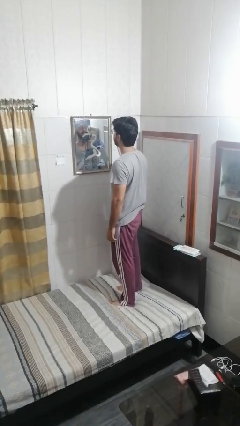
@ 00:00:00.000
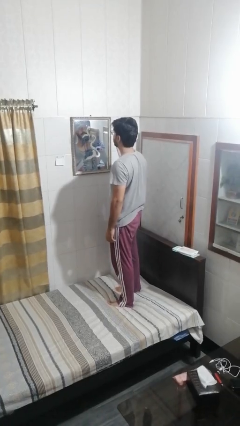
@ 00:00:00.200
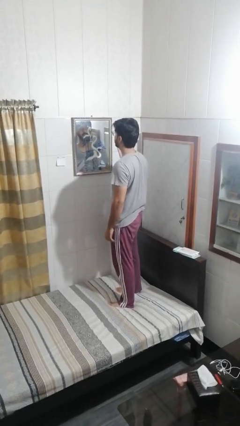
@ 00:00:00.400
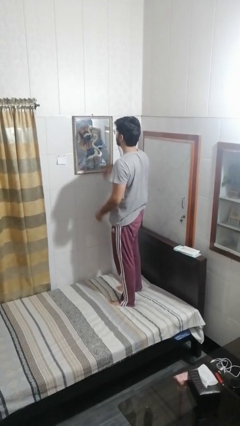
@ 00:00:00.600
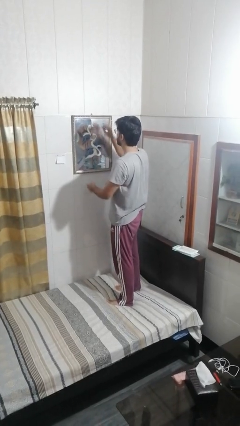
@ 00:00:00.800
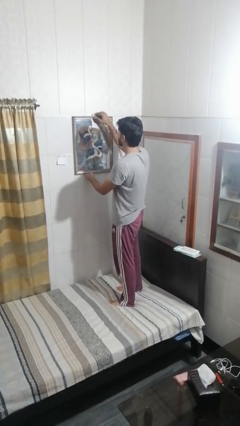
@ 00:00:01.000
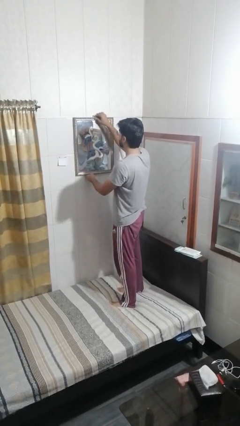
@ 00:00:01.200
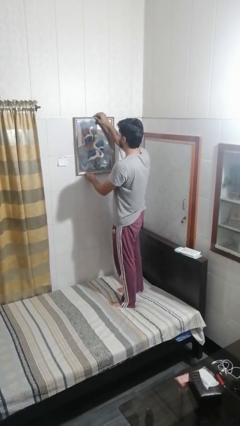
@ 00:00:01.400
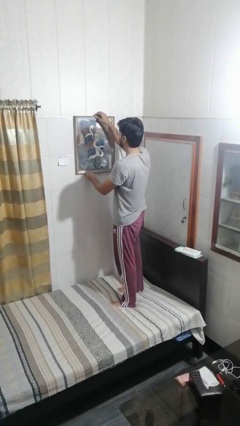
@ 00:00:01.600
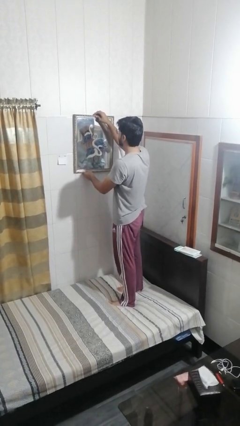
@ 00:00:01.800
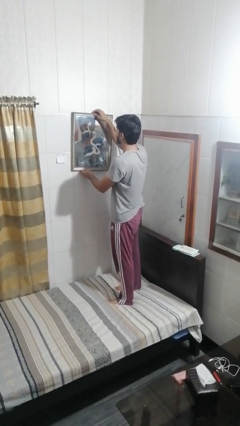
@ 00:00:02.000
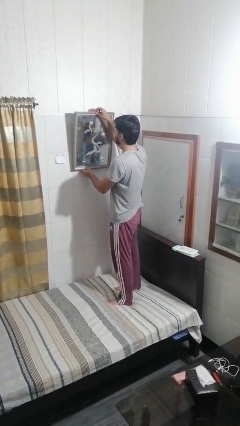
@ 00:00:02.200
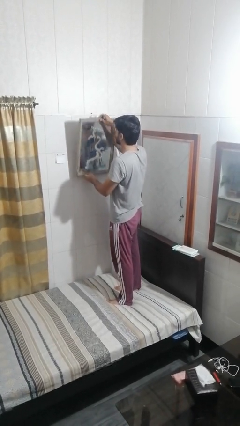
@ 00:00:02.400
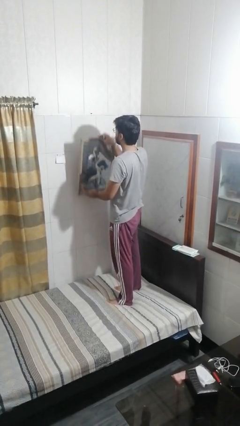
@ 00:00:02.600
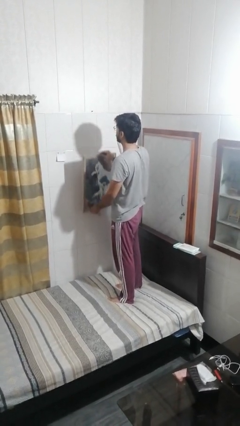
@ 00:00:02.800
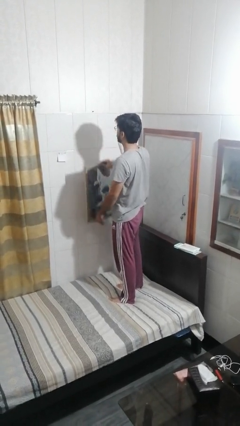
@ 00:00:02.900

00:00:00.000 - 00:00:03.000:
person takes down picture frame

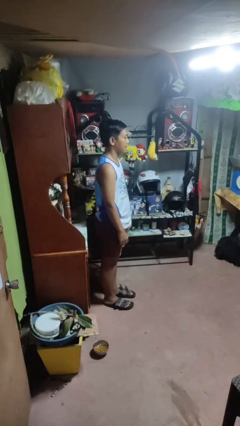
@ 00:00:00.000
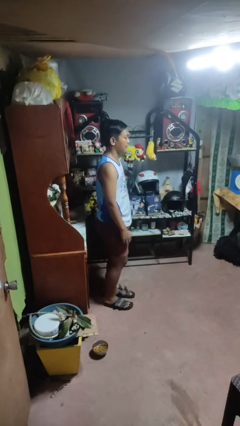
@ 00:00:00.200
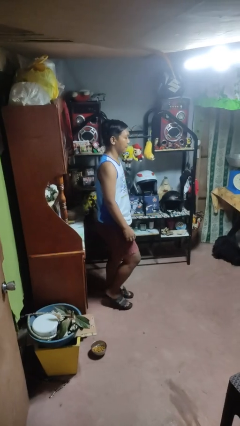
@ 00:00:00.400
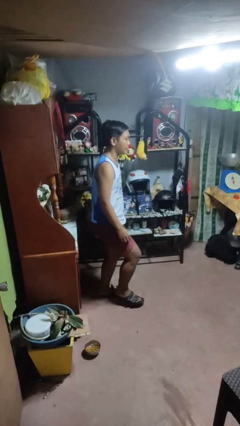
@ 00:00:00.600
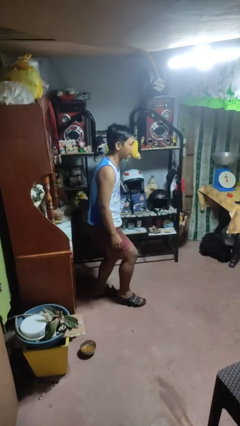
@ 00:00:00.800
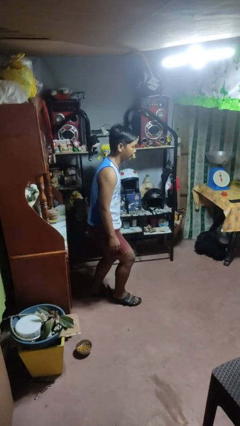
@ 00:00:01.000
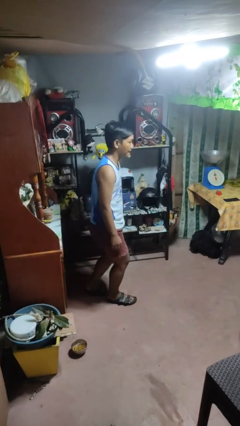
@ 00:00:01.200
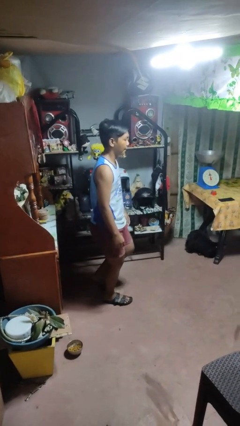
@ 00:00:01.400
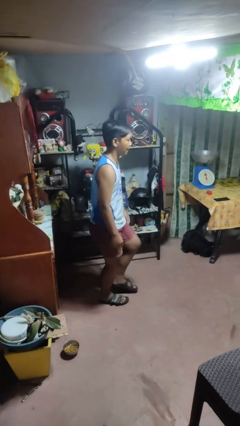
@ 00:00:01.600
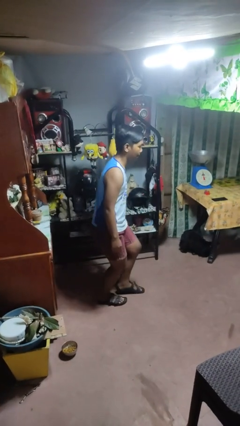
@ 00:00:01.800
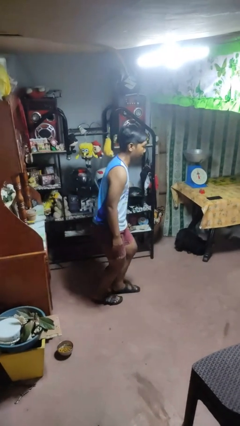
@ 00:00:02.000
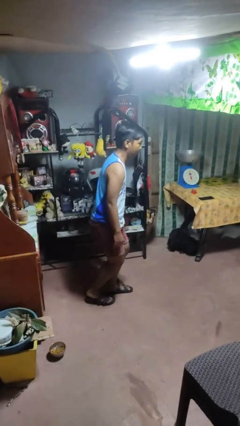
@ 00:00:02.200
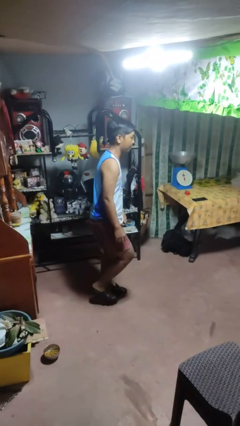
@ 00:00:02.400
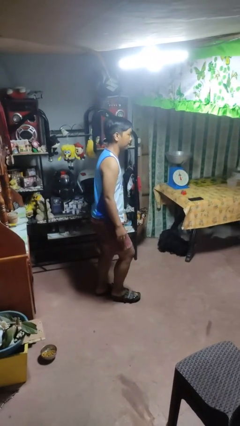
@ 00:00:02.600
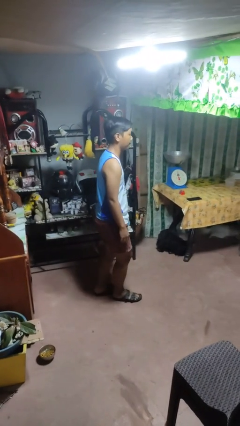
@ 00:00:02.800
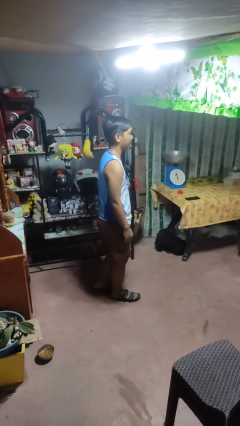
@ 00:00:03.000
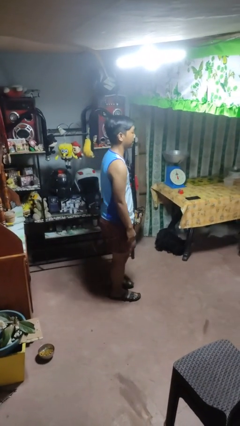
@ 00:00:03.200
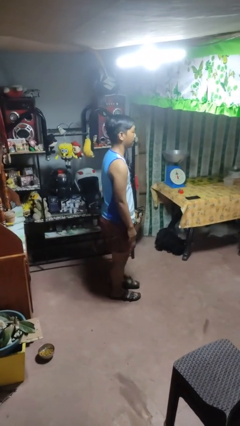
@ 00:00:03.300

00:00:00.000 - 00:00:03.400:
person walks tiptoe

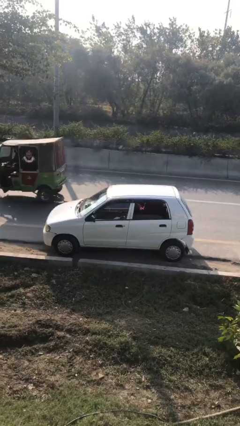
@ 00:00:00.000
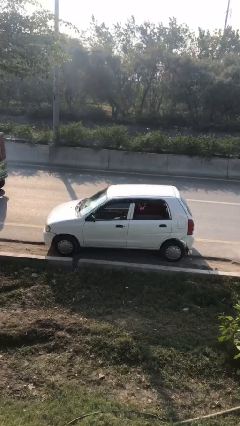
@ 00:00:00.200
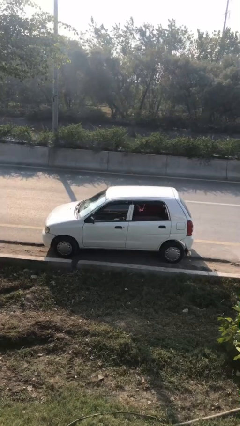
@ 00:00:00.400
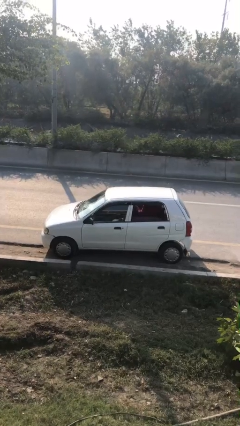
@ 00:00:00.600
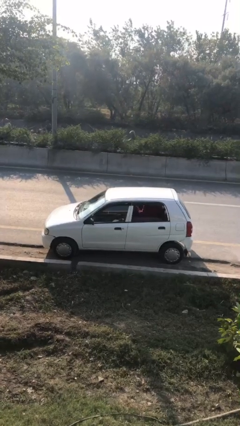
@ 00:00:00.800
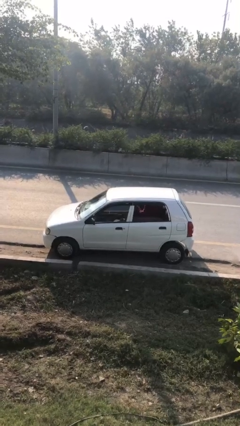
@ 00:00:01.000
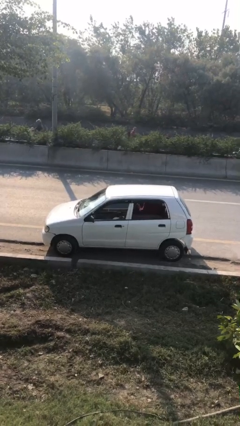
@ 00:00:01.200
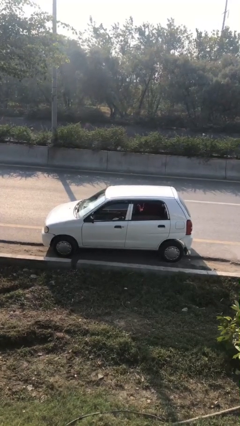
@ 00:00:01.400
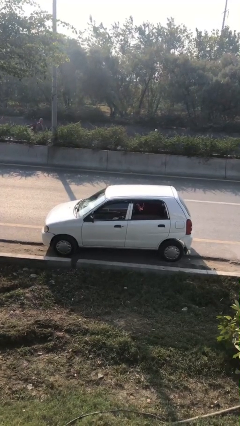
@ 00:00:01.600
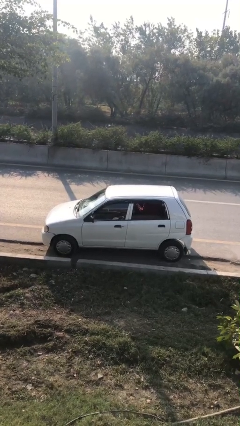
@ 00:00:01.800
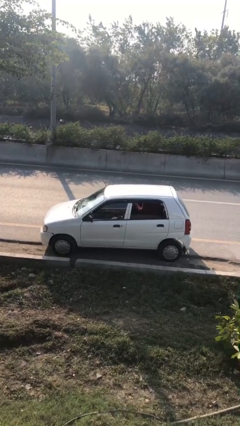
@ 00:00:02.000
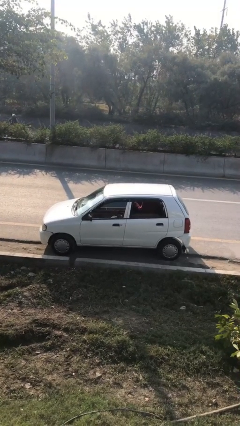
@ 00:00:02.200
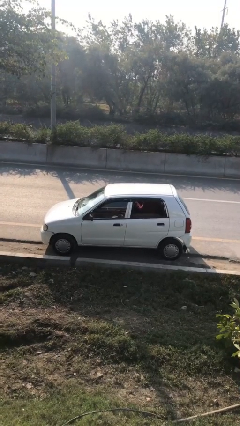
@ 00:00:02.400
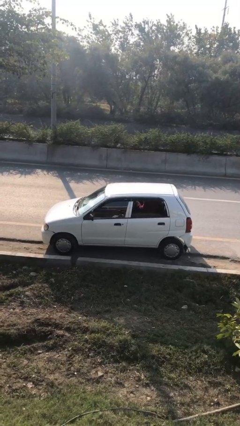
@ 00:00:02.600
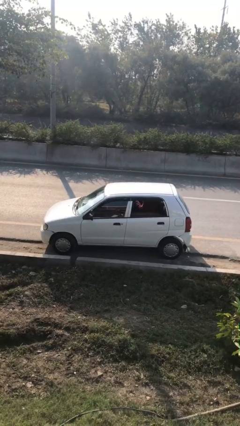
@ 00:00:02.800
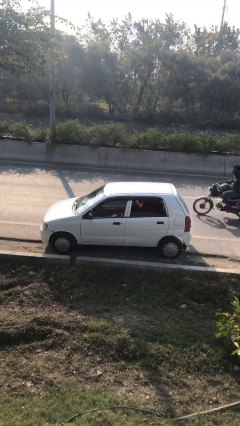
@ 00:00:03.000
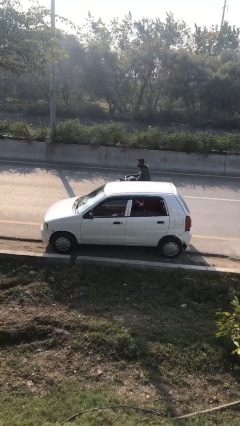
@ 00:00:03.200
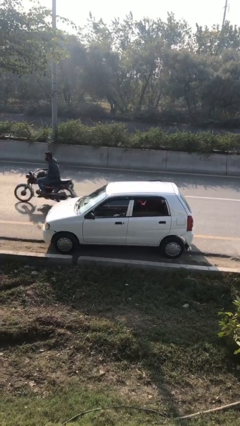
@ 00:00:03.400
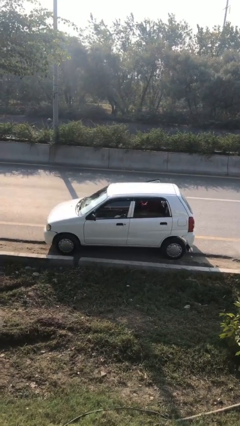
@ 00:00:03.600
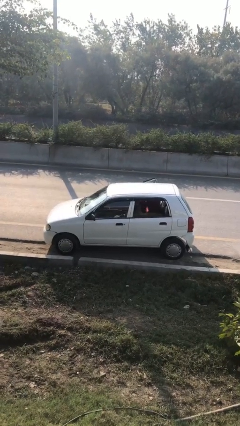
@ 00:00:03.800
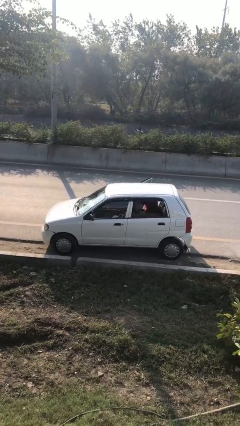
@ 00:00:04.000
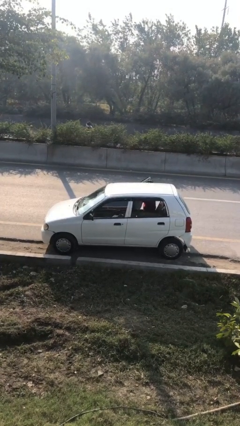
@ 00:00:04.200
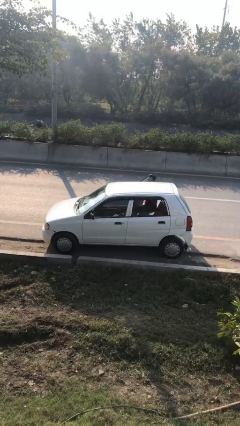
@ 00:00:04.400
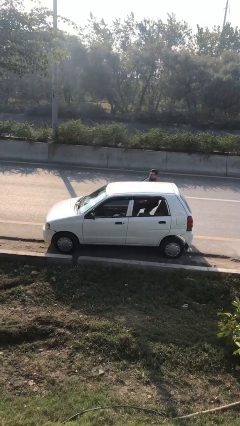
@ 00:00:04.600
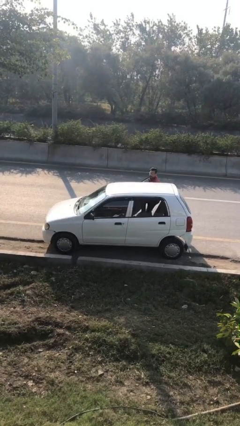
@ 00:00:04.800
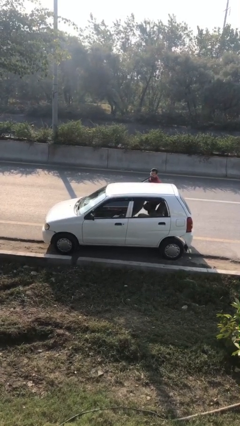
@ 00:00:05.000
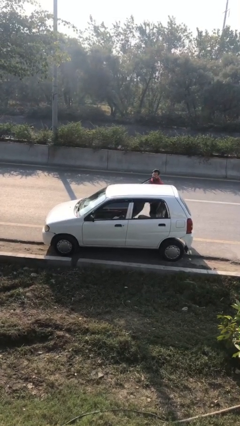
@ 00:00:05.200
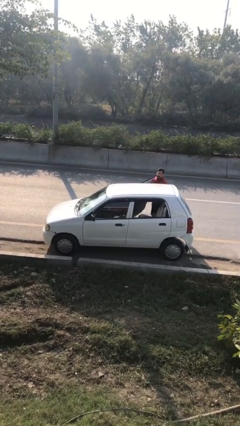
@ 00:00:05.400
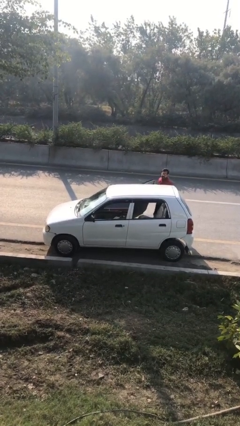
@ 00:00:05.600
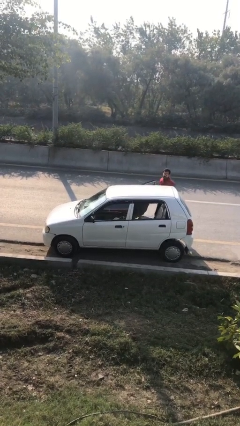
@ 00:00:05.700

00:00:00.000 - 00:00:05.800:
car drops off person

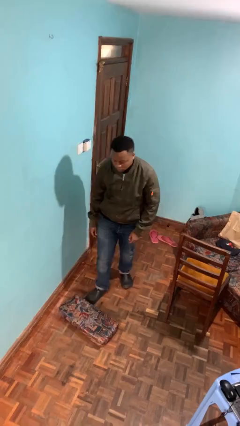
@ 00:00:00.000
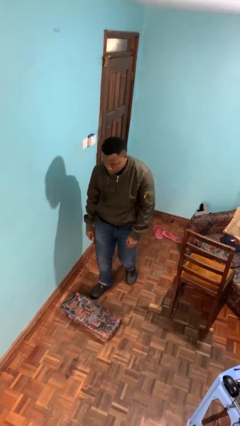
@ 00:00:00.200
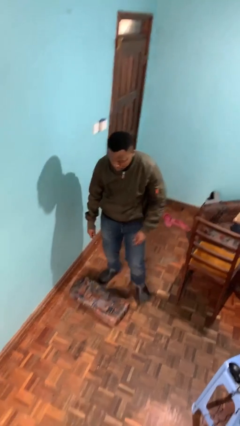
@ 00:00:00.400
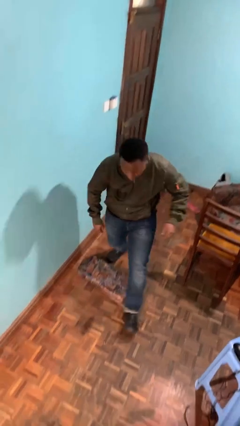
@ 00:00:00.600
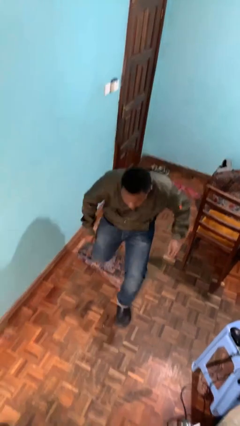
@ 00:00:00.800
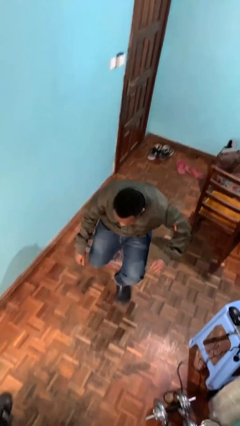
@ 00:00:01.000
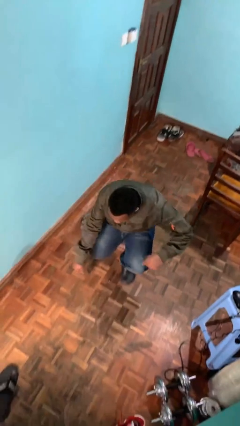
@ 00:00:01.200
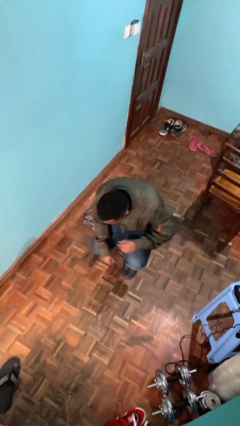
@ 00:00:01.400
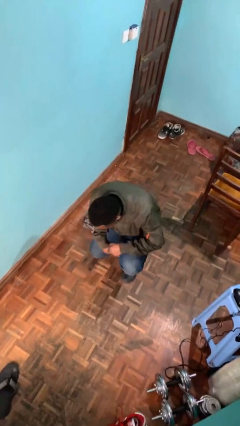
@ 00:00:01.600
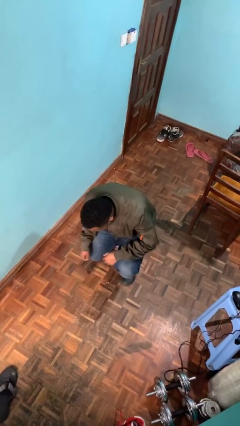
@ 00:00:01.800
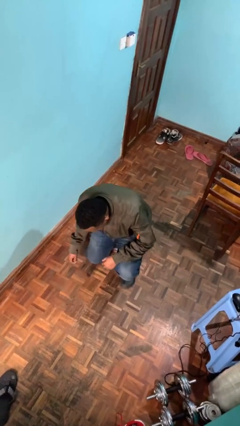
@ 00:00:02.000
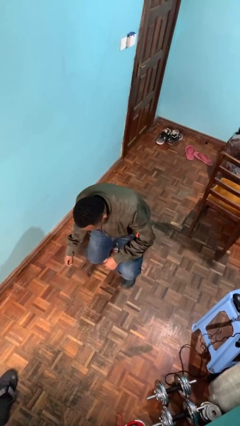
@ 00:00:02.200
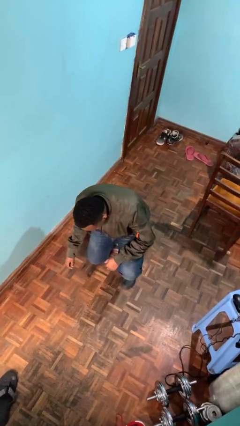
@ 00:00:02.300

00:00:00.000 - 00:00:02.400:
person trips on object on floor

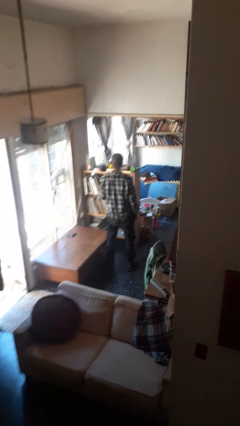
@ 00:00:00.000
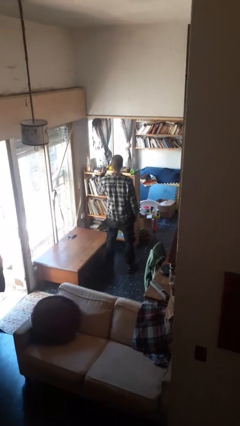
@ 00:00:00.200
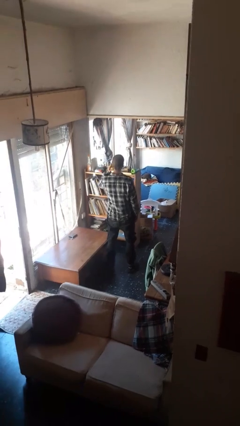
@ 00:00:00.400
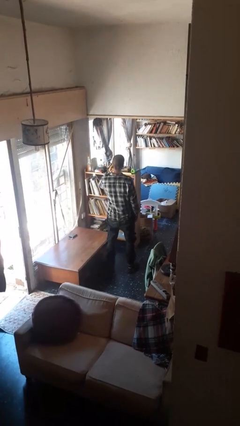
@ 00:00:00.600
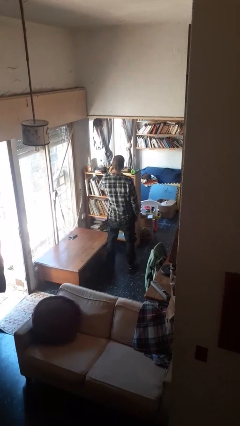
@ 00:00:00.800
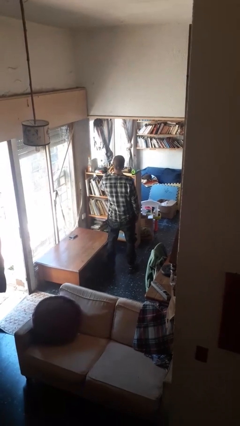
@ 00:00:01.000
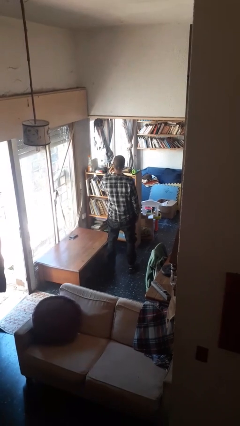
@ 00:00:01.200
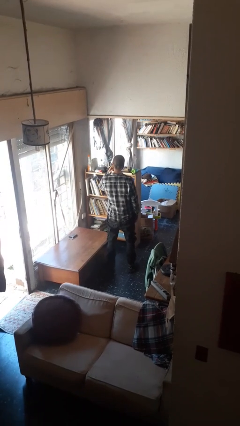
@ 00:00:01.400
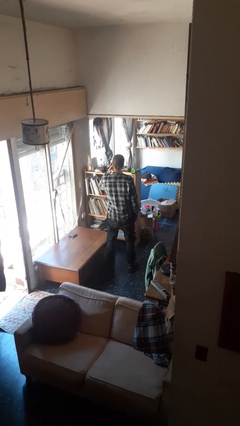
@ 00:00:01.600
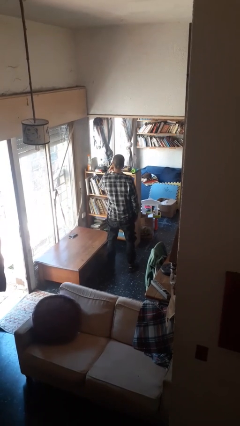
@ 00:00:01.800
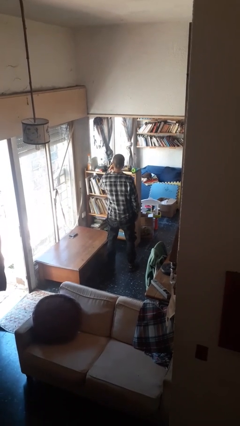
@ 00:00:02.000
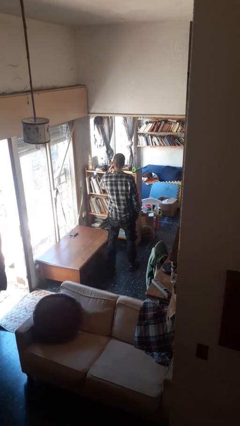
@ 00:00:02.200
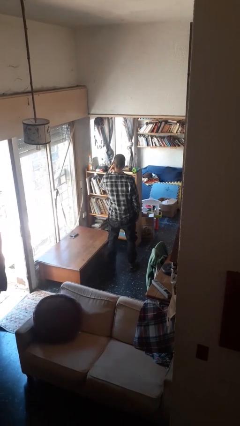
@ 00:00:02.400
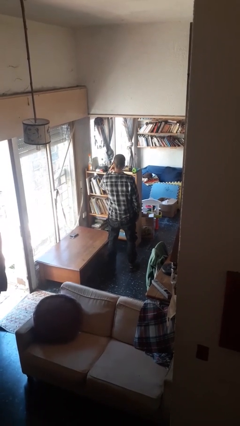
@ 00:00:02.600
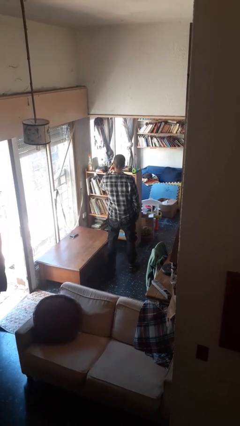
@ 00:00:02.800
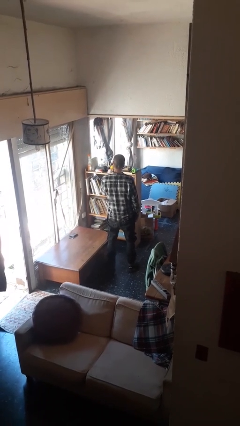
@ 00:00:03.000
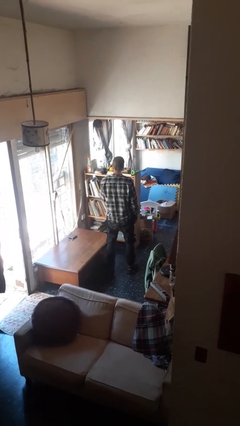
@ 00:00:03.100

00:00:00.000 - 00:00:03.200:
person gestures listen closely
